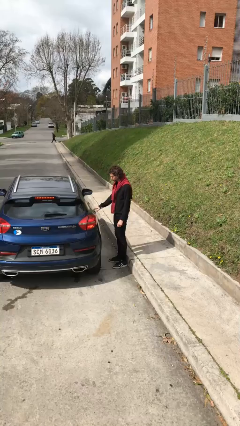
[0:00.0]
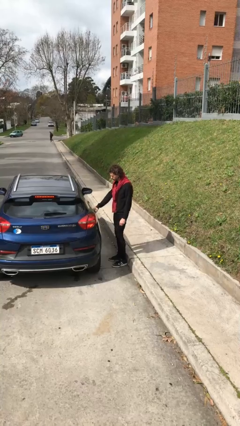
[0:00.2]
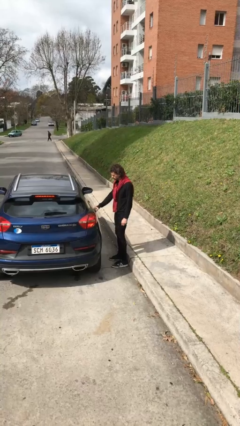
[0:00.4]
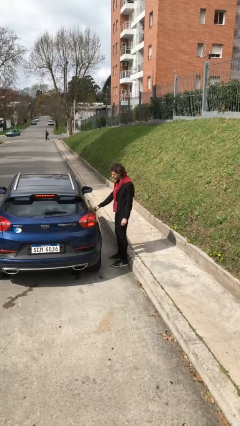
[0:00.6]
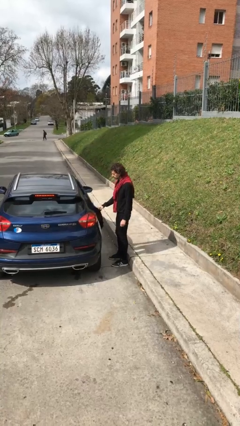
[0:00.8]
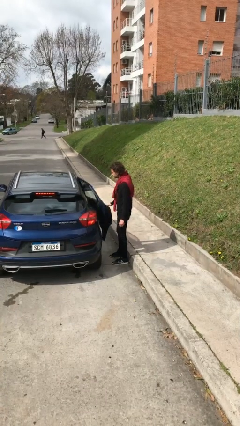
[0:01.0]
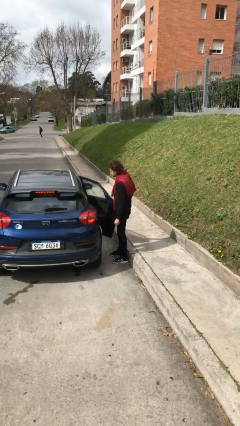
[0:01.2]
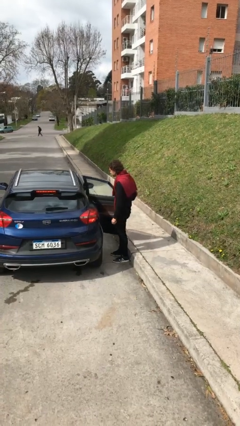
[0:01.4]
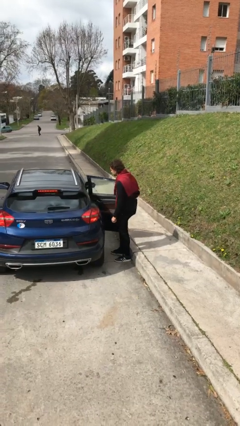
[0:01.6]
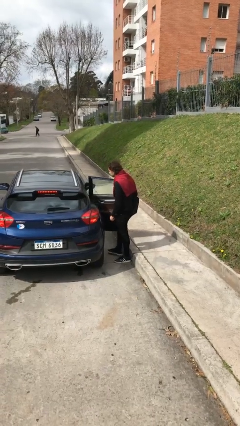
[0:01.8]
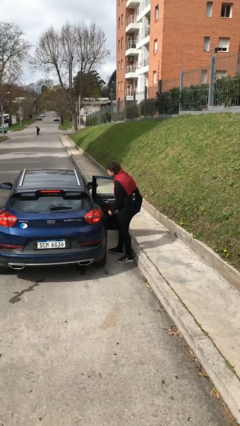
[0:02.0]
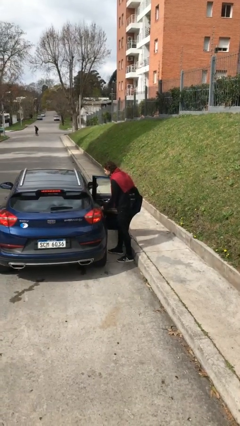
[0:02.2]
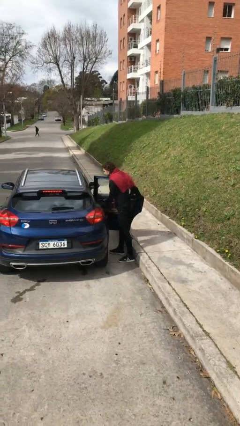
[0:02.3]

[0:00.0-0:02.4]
person opens car door

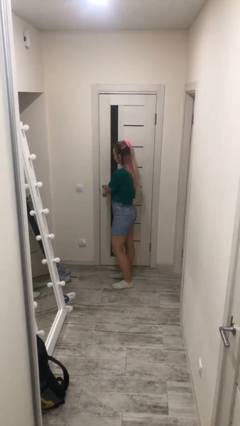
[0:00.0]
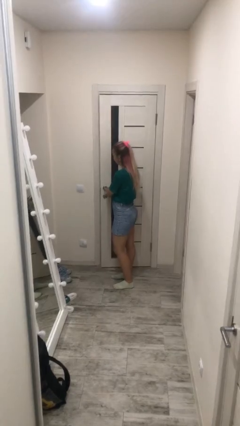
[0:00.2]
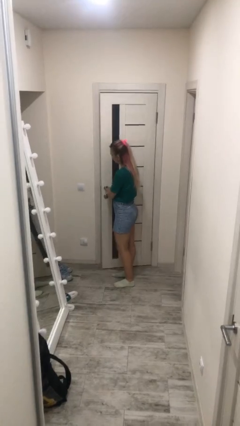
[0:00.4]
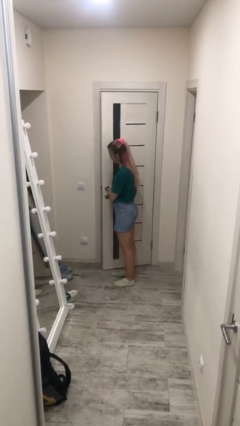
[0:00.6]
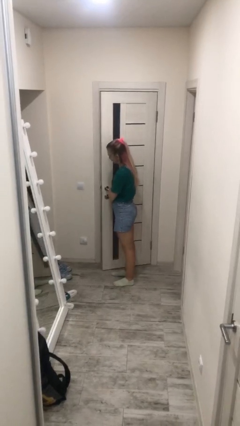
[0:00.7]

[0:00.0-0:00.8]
person opens facility door

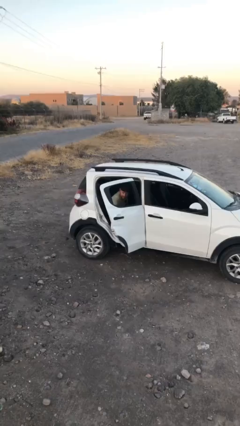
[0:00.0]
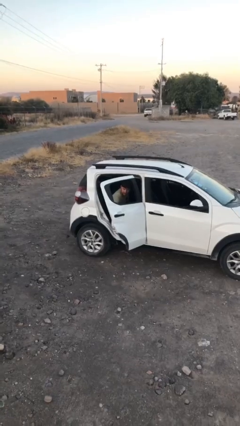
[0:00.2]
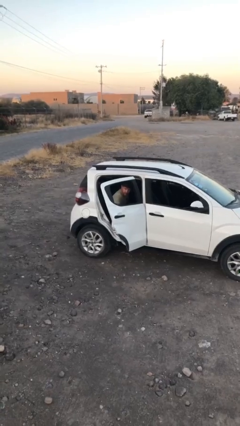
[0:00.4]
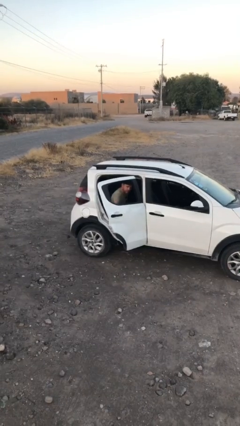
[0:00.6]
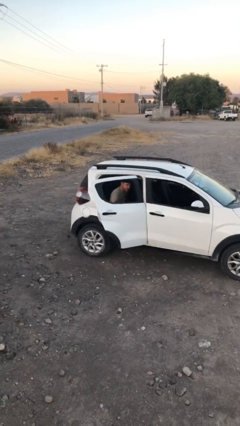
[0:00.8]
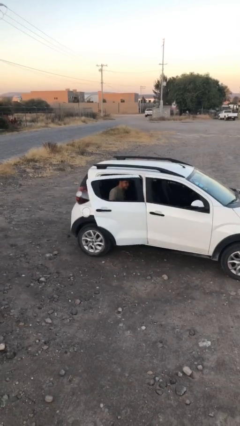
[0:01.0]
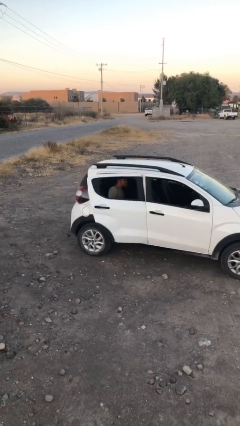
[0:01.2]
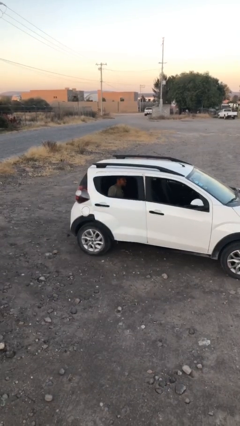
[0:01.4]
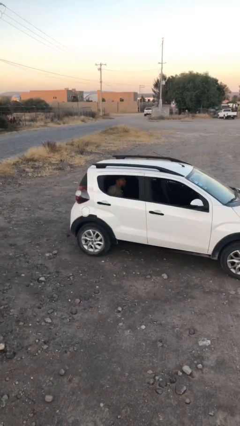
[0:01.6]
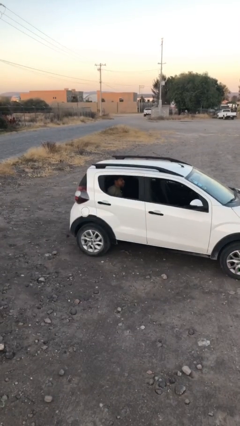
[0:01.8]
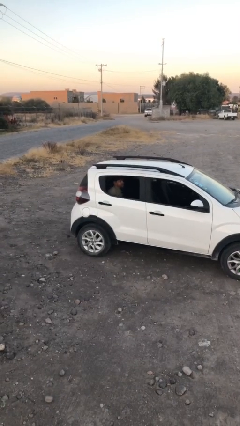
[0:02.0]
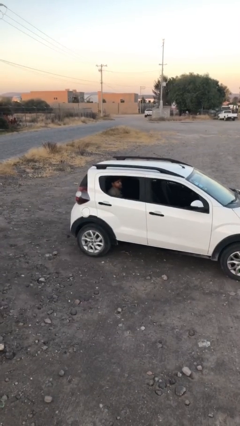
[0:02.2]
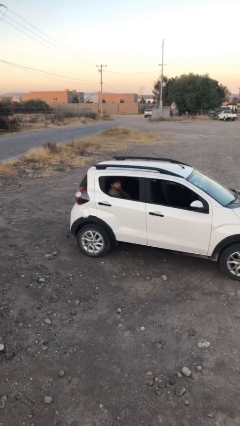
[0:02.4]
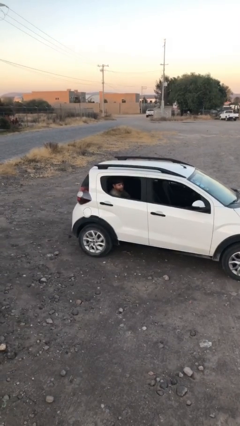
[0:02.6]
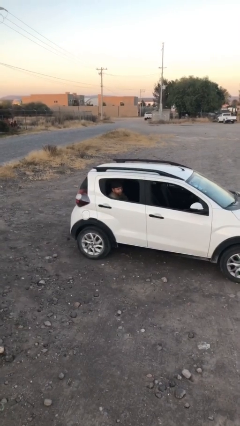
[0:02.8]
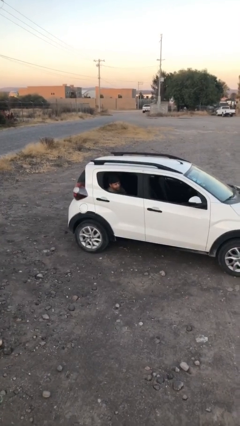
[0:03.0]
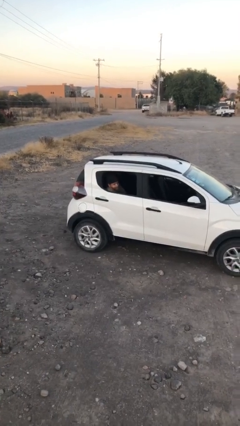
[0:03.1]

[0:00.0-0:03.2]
person closes car door

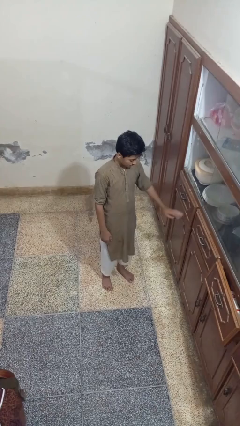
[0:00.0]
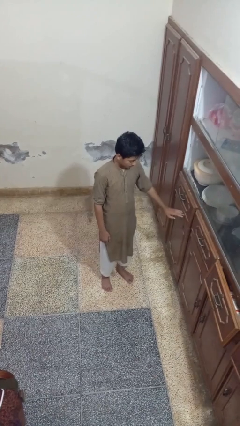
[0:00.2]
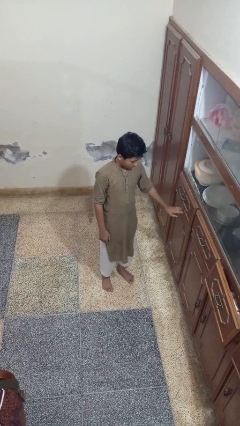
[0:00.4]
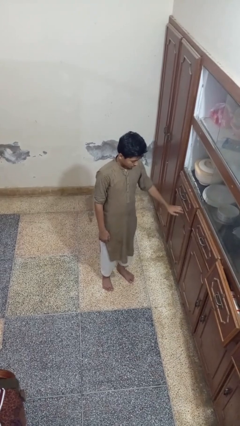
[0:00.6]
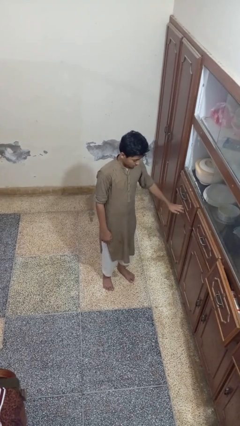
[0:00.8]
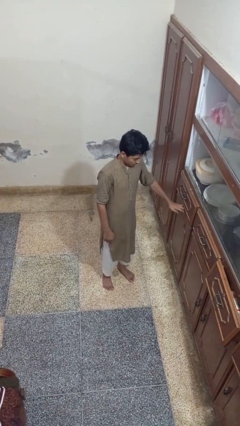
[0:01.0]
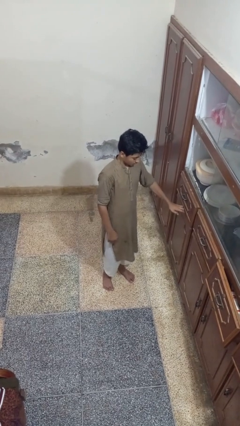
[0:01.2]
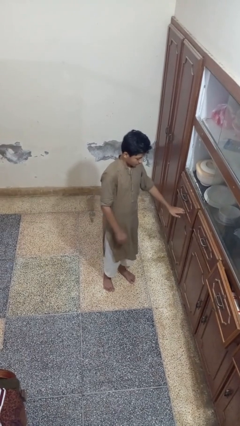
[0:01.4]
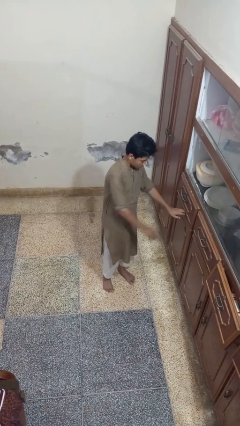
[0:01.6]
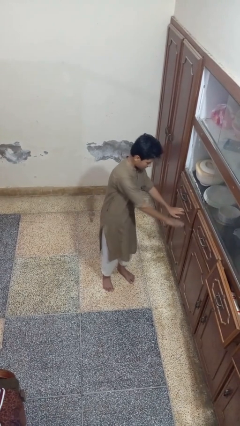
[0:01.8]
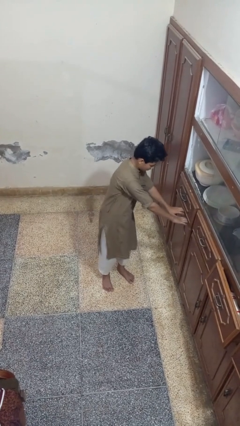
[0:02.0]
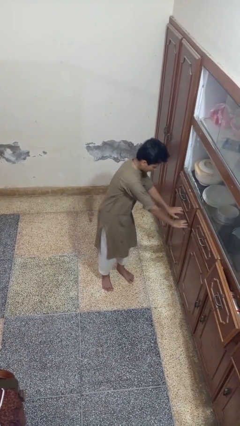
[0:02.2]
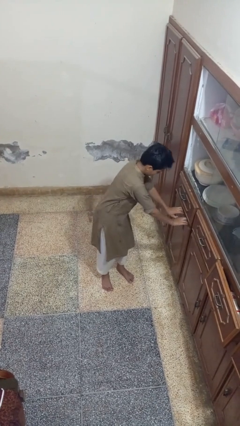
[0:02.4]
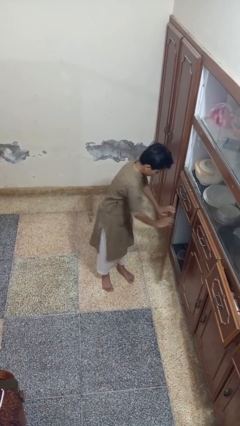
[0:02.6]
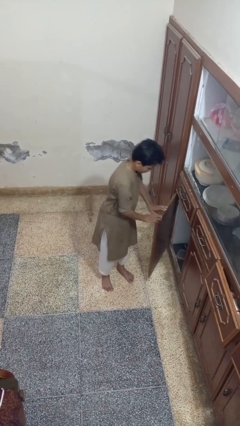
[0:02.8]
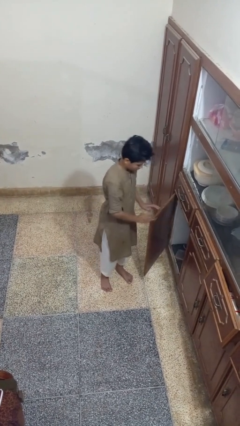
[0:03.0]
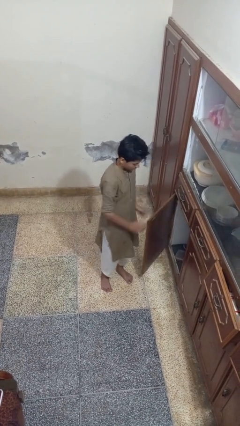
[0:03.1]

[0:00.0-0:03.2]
person opens cabinet

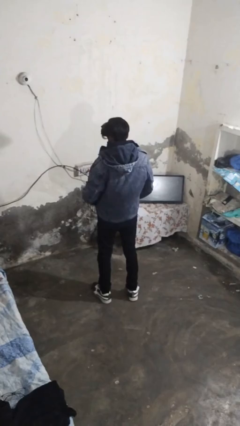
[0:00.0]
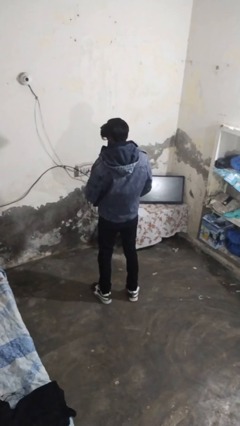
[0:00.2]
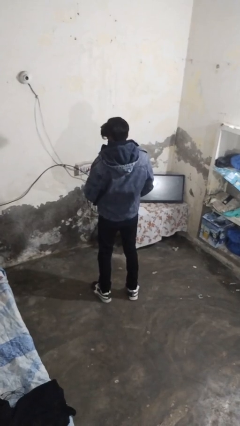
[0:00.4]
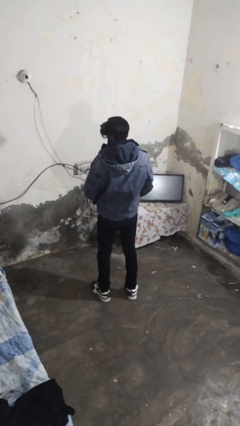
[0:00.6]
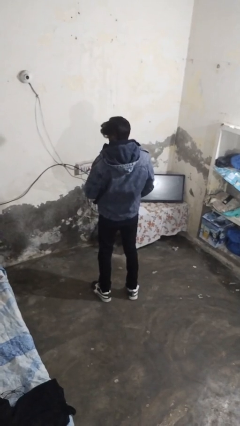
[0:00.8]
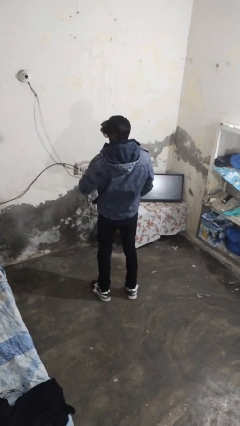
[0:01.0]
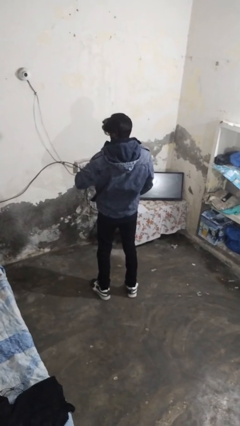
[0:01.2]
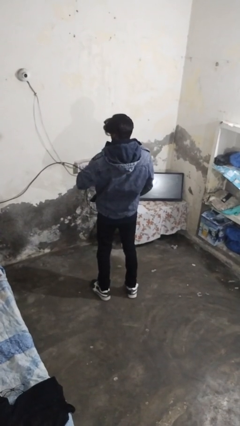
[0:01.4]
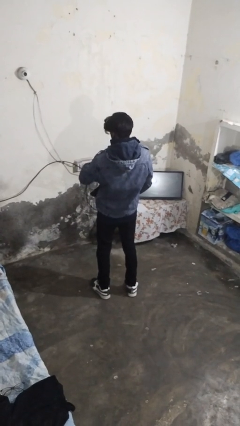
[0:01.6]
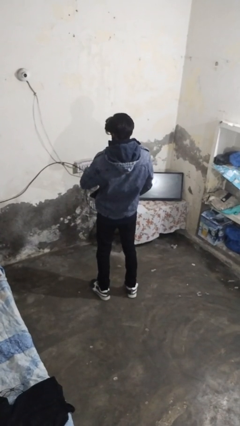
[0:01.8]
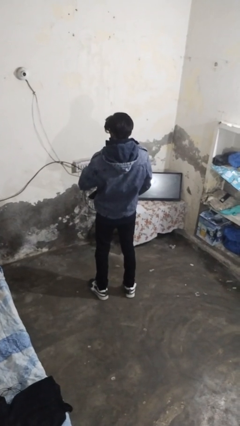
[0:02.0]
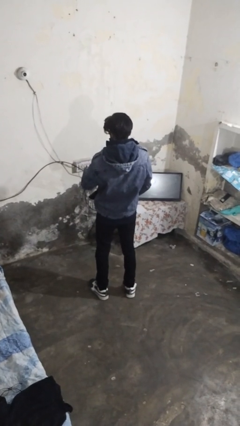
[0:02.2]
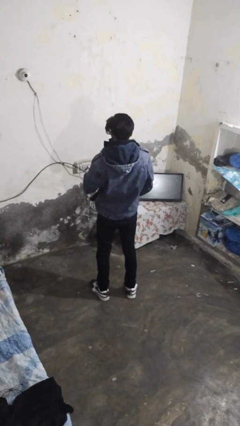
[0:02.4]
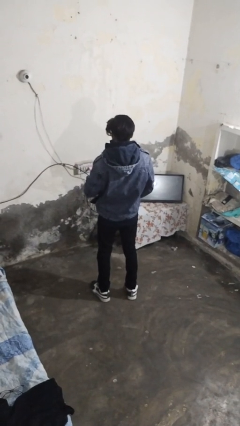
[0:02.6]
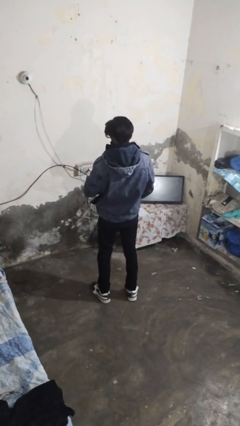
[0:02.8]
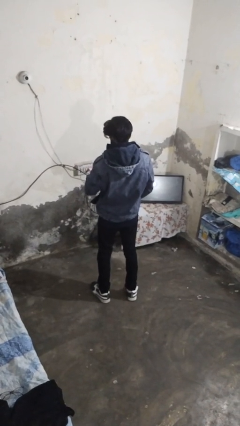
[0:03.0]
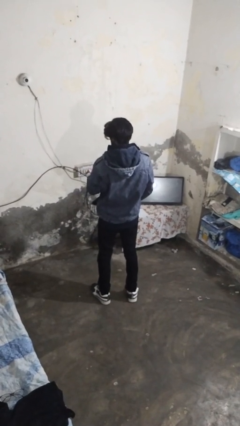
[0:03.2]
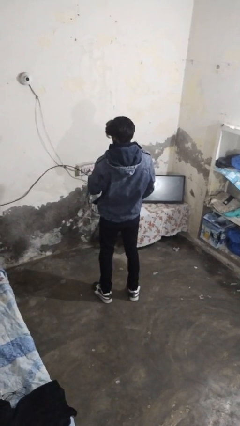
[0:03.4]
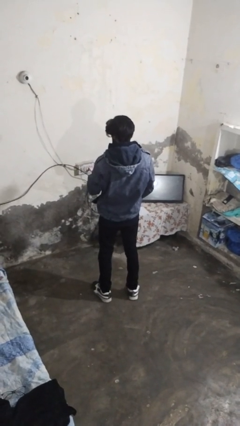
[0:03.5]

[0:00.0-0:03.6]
person zips up jacket

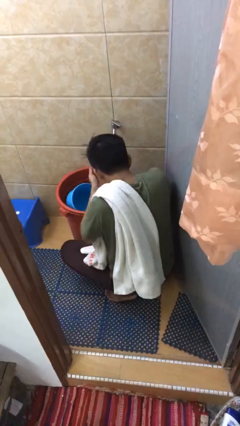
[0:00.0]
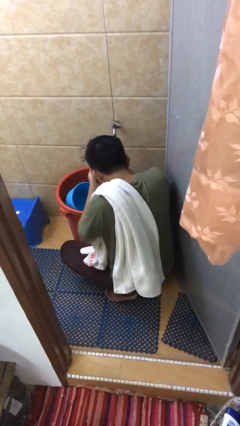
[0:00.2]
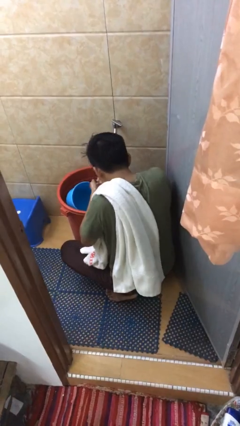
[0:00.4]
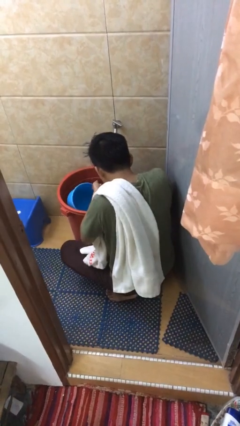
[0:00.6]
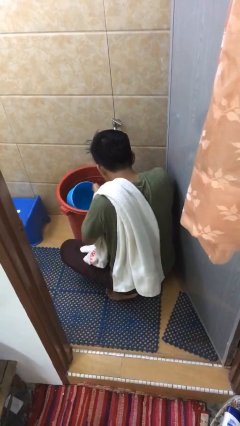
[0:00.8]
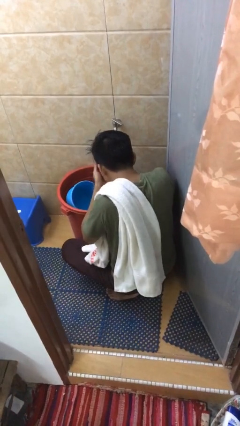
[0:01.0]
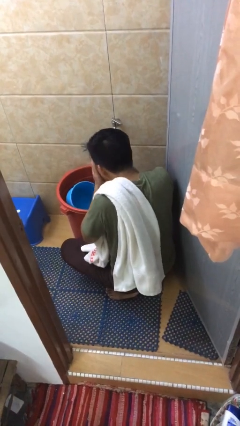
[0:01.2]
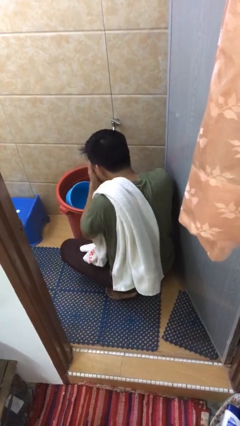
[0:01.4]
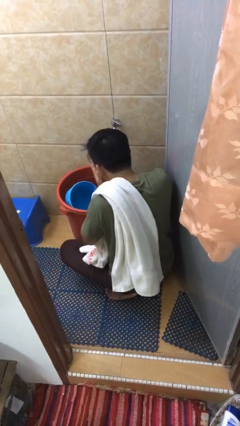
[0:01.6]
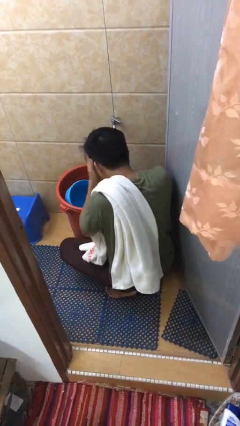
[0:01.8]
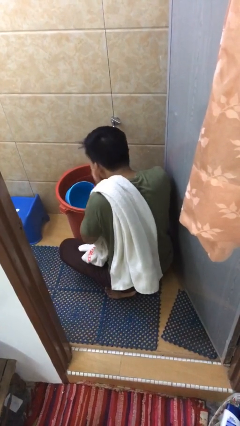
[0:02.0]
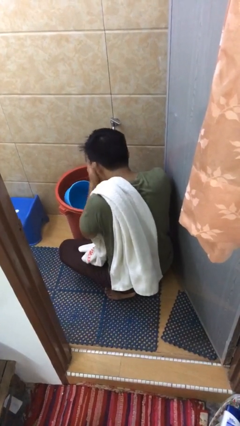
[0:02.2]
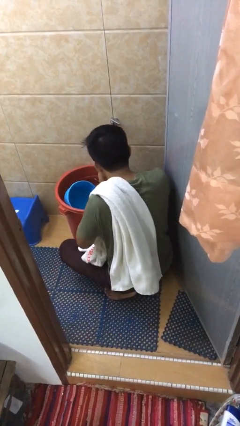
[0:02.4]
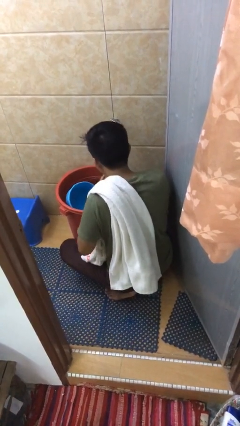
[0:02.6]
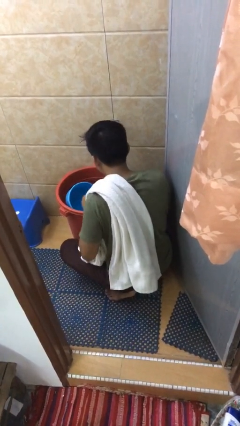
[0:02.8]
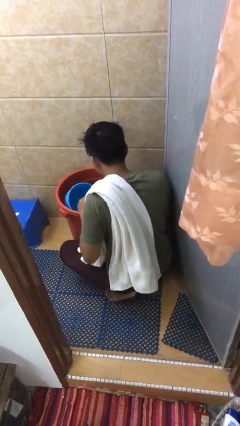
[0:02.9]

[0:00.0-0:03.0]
person washes face

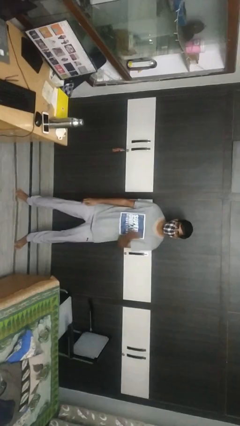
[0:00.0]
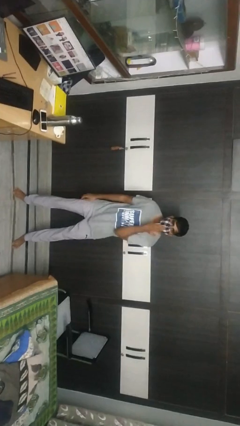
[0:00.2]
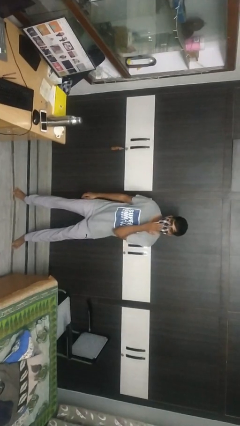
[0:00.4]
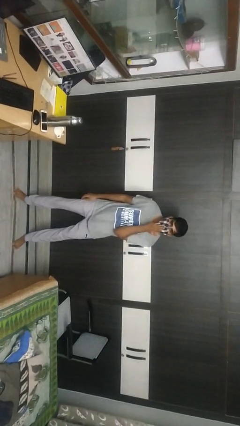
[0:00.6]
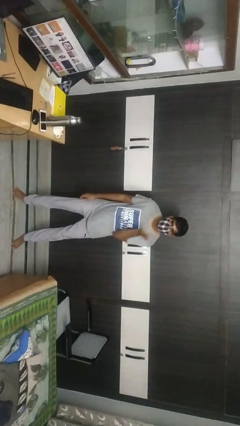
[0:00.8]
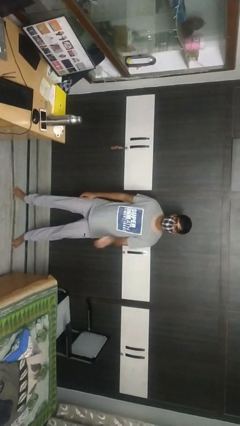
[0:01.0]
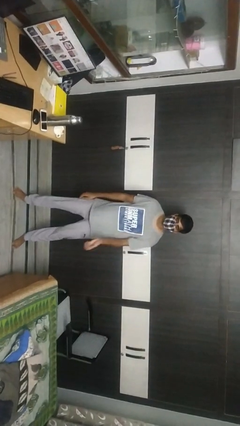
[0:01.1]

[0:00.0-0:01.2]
person gestures blow kiss
